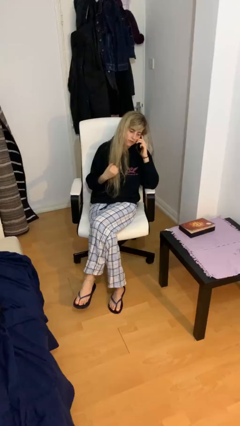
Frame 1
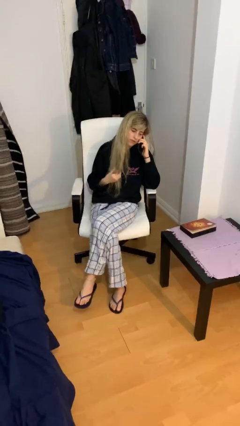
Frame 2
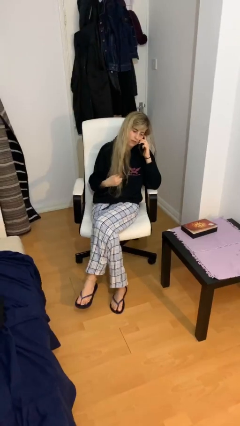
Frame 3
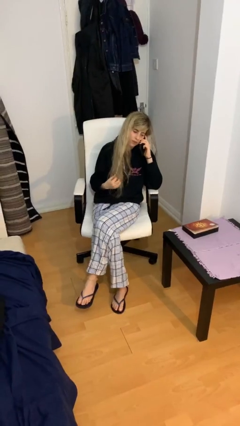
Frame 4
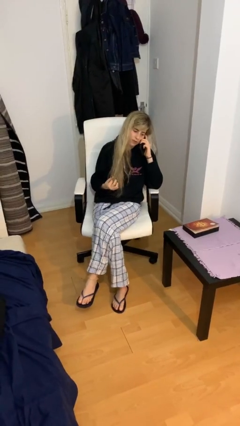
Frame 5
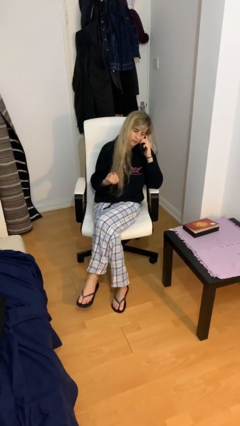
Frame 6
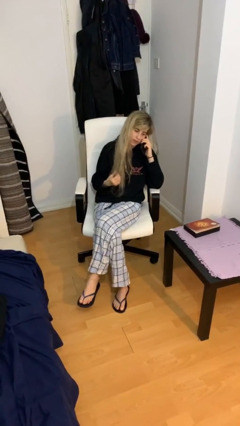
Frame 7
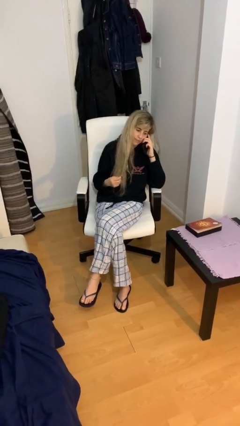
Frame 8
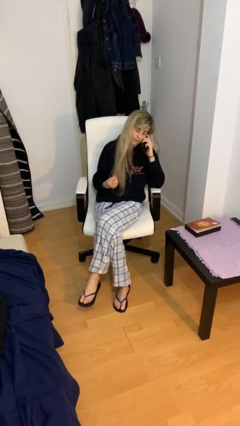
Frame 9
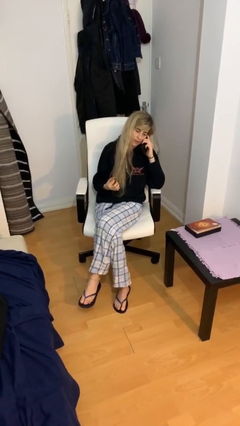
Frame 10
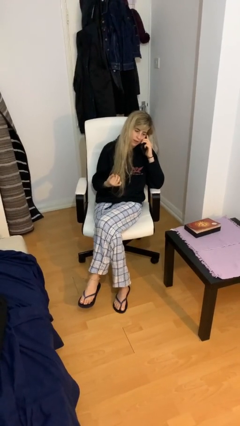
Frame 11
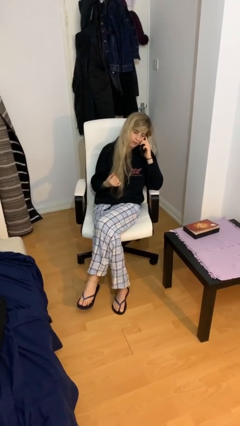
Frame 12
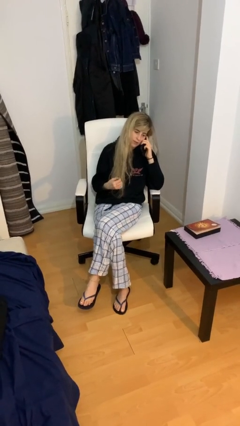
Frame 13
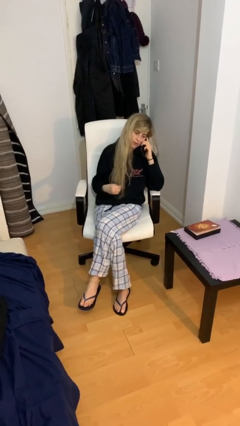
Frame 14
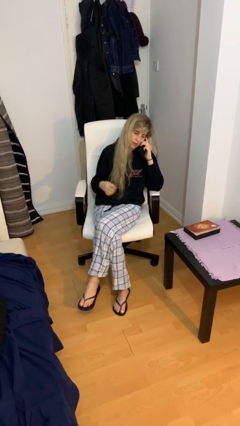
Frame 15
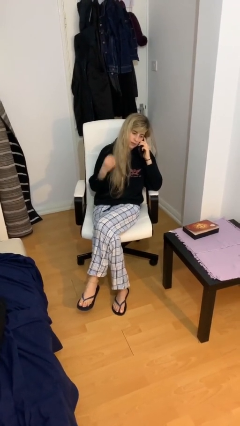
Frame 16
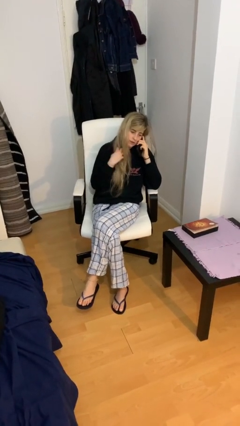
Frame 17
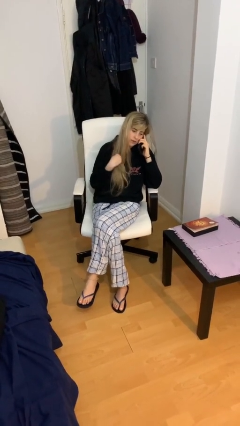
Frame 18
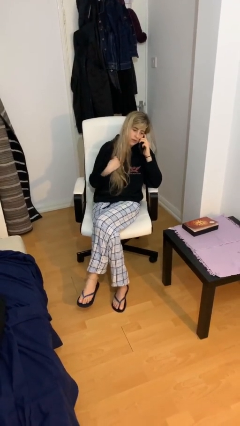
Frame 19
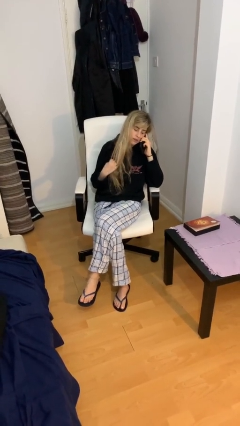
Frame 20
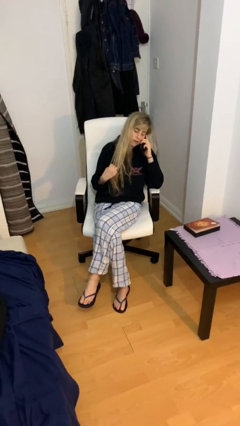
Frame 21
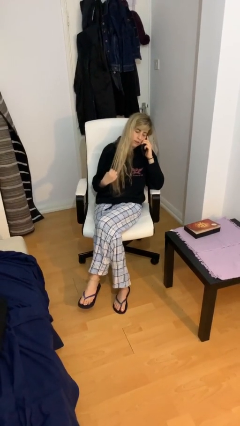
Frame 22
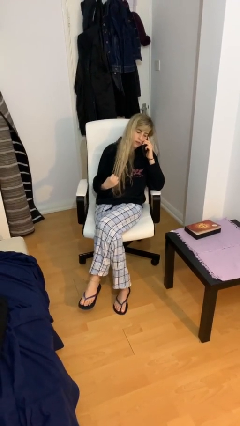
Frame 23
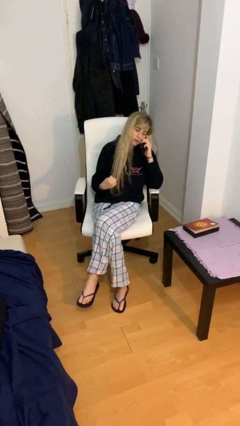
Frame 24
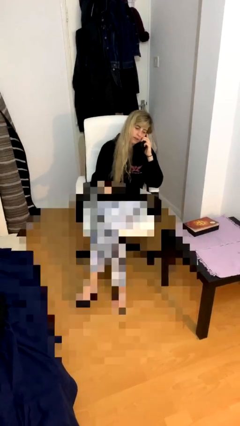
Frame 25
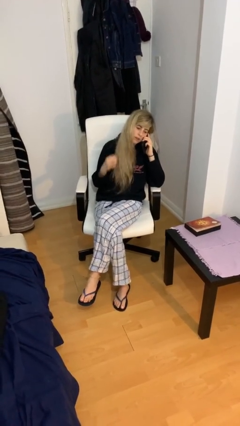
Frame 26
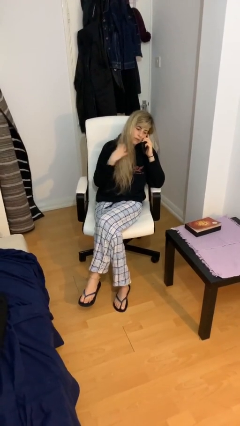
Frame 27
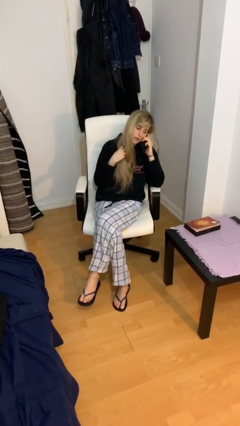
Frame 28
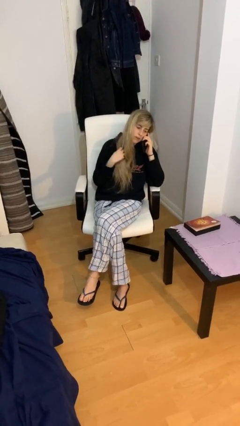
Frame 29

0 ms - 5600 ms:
person talks on phone

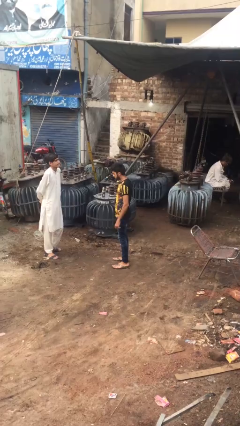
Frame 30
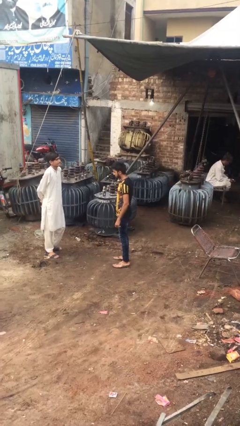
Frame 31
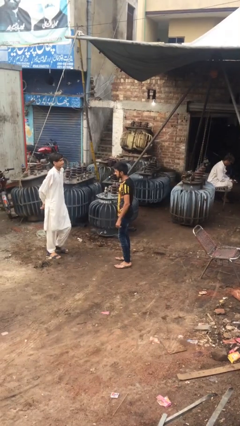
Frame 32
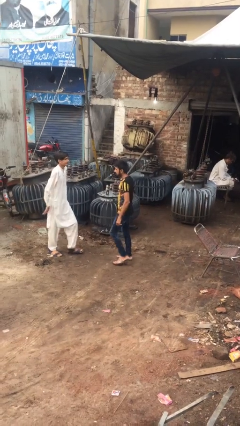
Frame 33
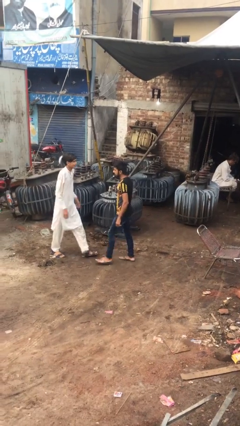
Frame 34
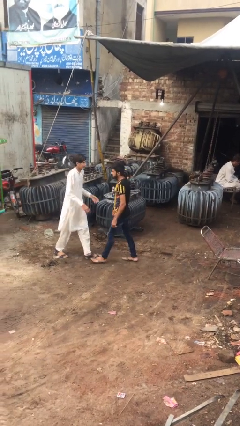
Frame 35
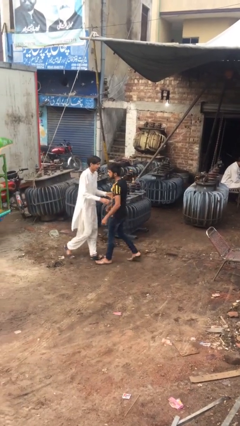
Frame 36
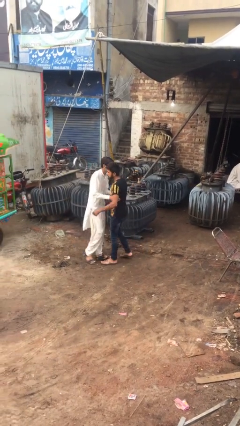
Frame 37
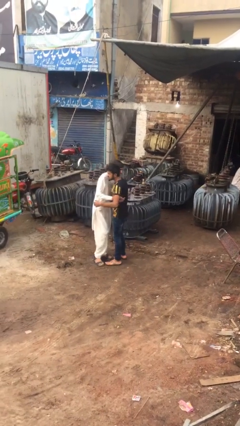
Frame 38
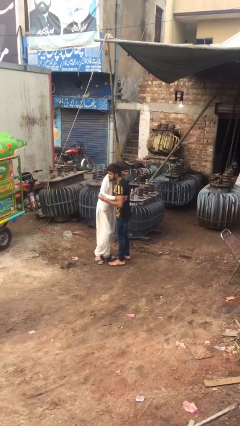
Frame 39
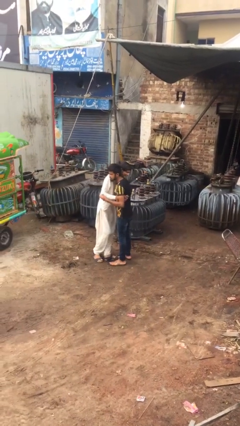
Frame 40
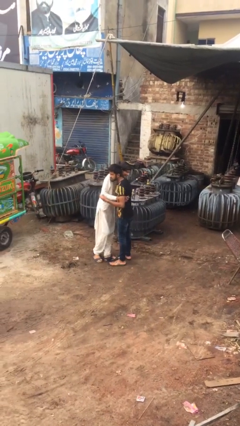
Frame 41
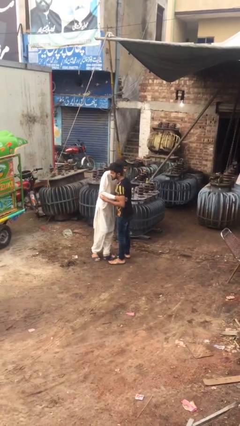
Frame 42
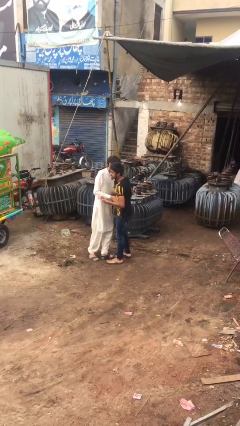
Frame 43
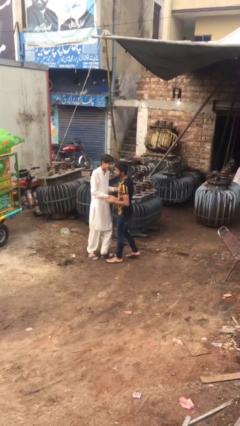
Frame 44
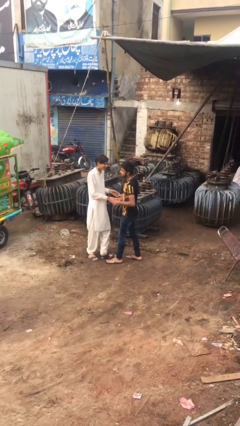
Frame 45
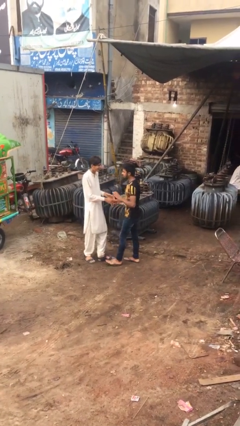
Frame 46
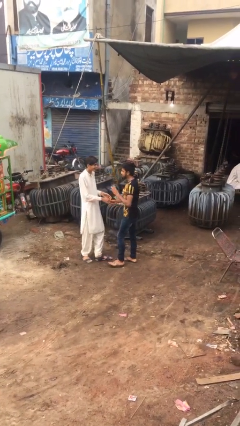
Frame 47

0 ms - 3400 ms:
person embraces person

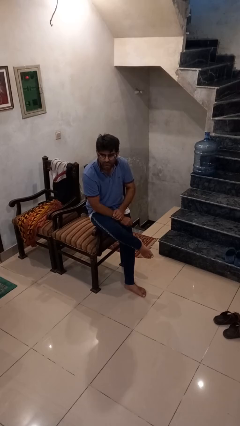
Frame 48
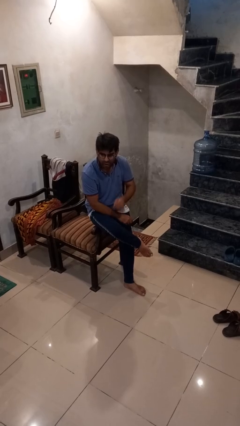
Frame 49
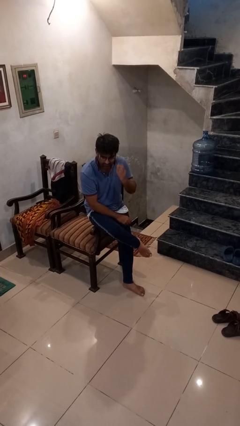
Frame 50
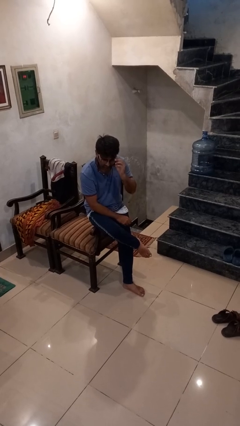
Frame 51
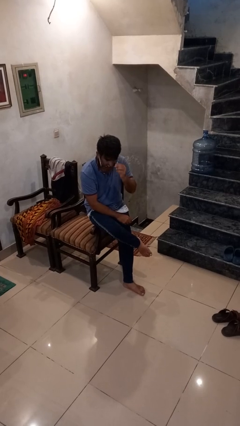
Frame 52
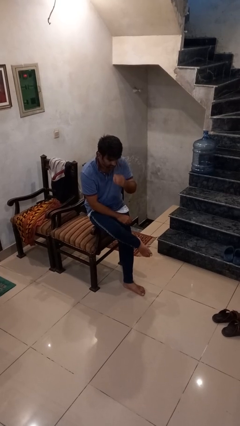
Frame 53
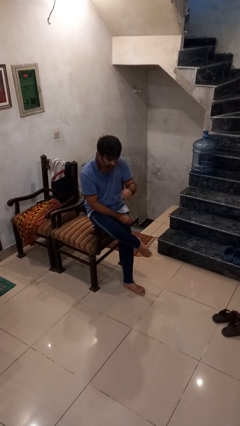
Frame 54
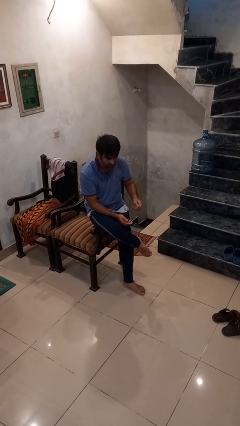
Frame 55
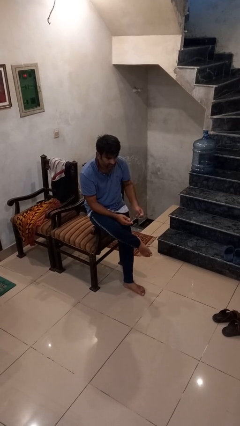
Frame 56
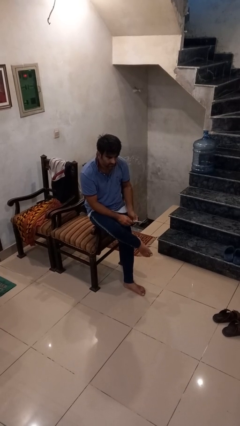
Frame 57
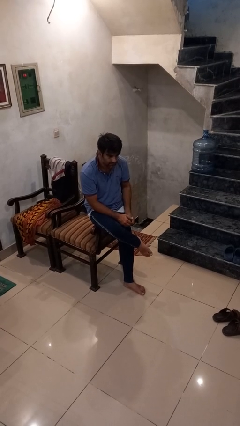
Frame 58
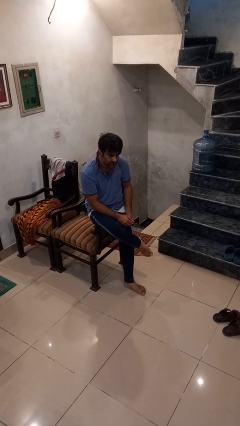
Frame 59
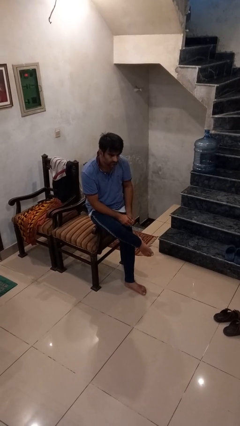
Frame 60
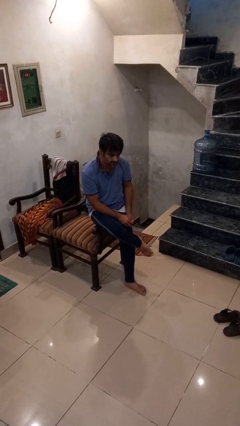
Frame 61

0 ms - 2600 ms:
person takes off glasses

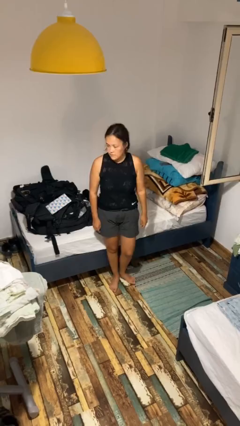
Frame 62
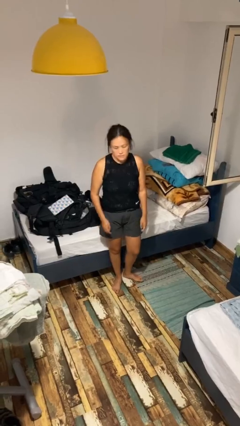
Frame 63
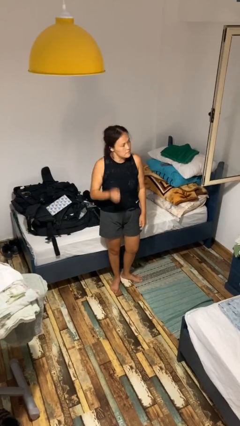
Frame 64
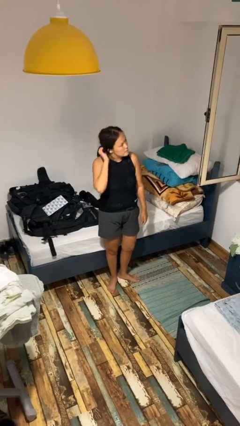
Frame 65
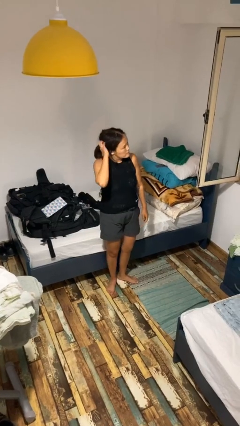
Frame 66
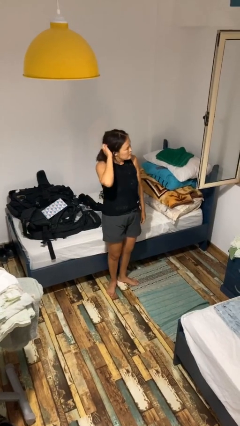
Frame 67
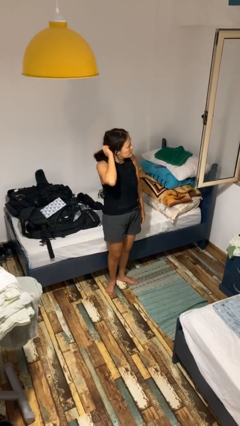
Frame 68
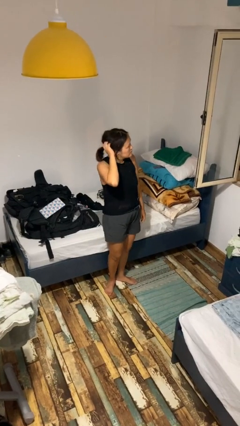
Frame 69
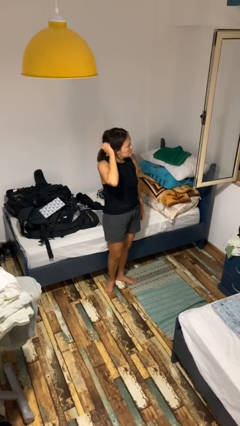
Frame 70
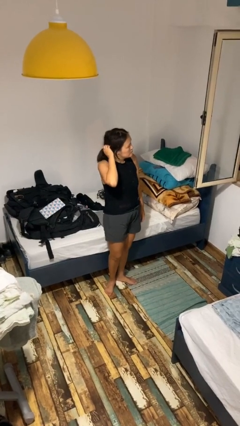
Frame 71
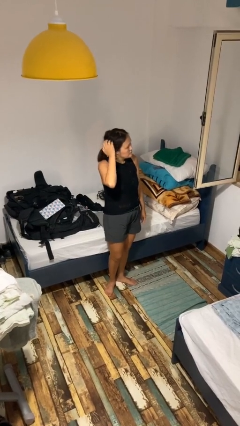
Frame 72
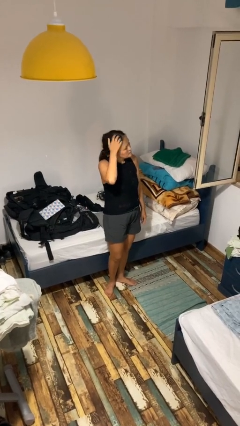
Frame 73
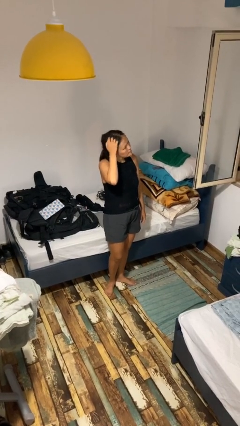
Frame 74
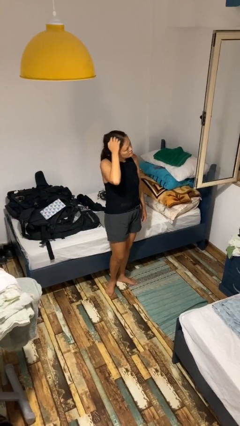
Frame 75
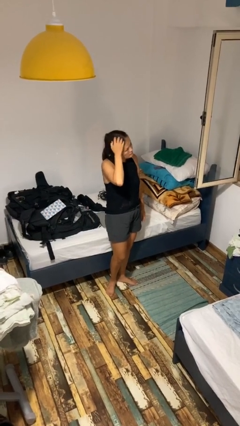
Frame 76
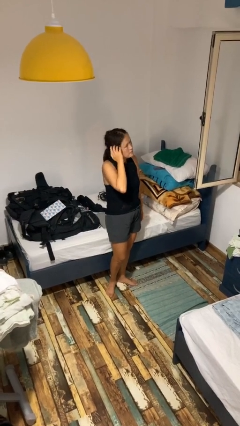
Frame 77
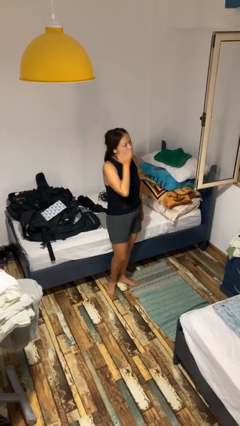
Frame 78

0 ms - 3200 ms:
person scratches face

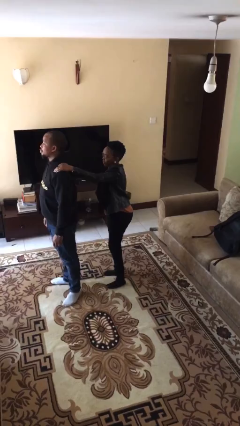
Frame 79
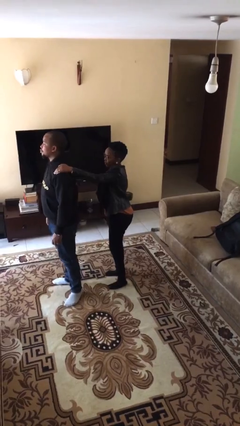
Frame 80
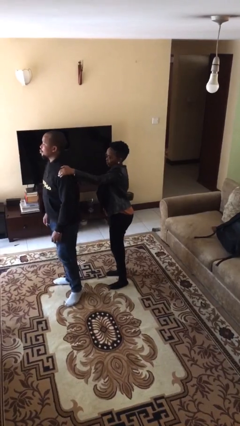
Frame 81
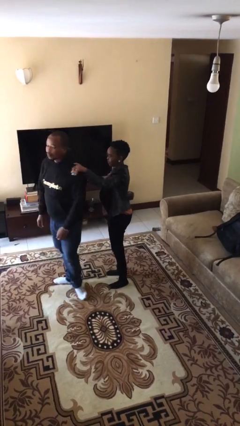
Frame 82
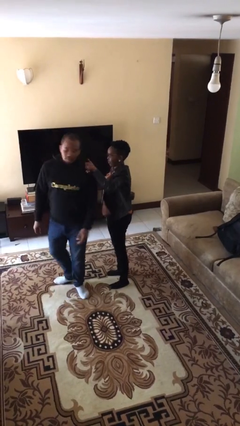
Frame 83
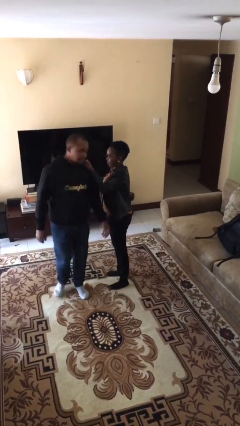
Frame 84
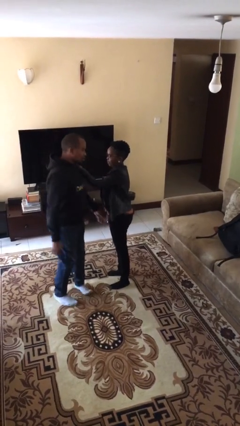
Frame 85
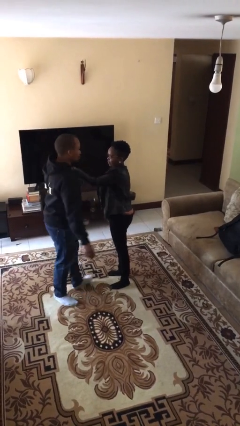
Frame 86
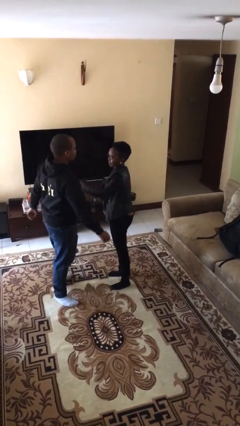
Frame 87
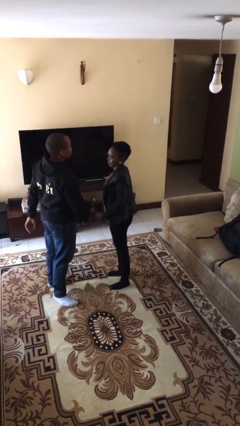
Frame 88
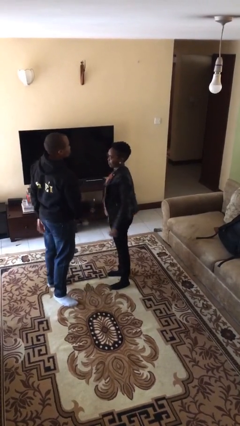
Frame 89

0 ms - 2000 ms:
person spins person around

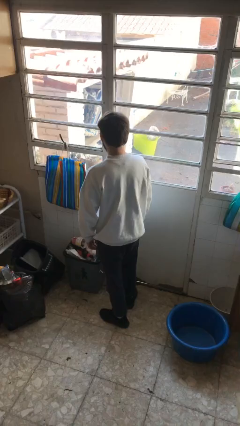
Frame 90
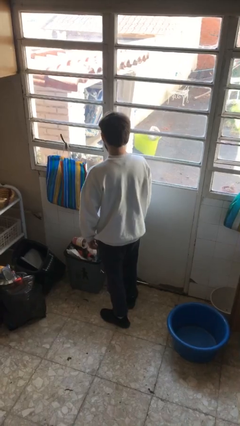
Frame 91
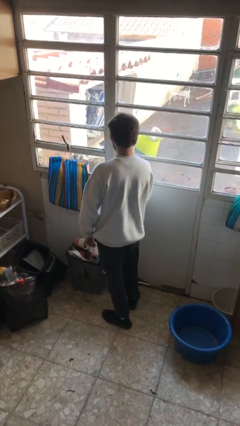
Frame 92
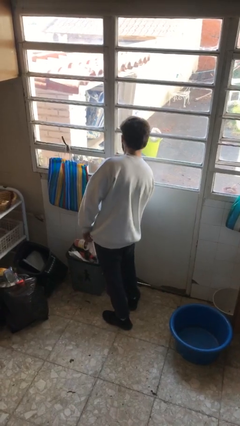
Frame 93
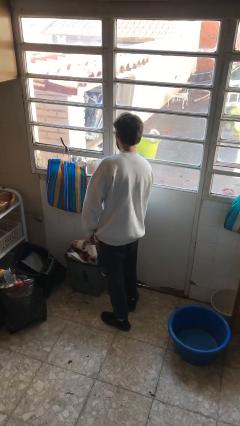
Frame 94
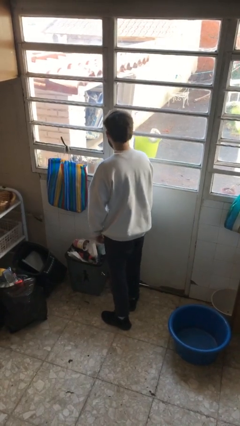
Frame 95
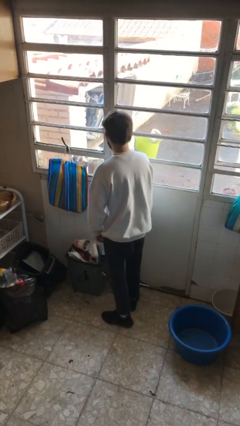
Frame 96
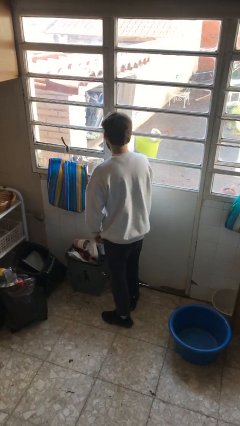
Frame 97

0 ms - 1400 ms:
person unlocks door with keys
